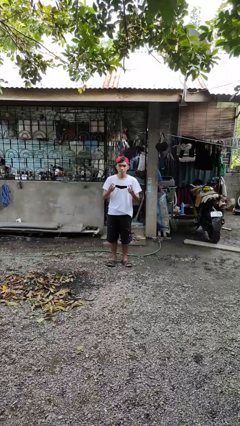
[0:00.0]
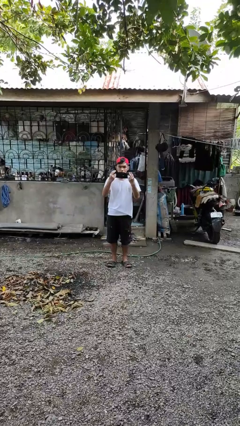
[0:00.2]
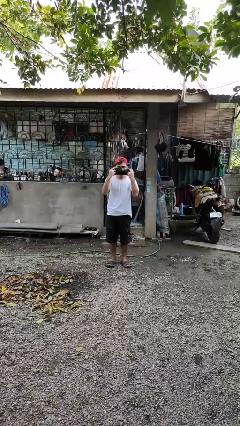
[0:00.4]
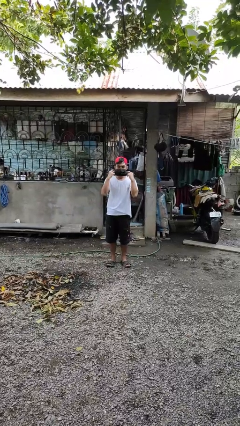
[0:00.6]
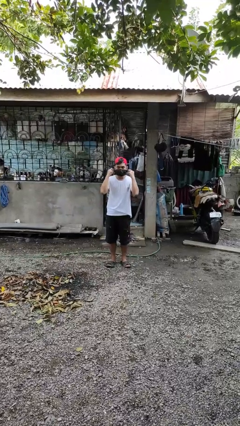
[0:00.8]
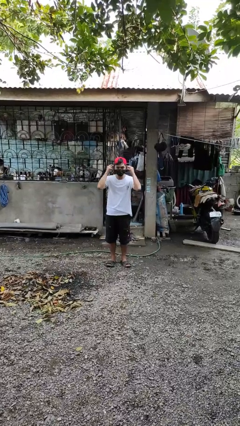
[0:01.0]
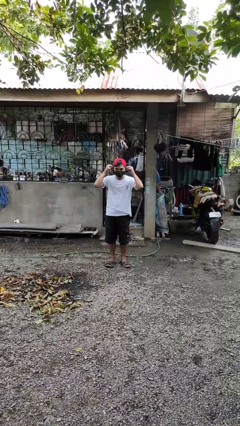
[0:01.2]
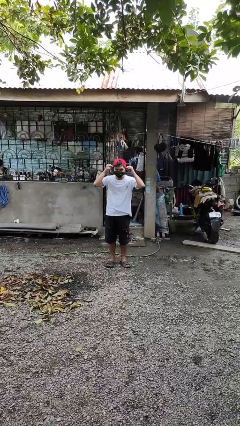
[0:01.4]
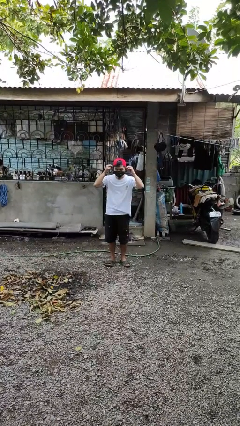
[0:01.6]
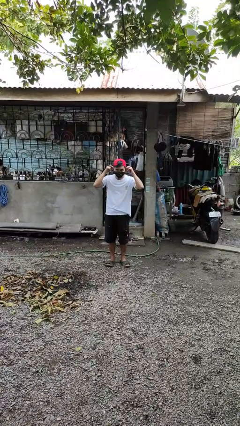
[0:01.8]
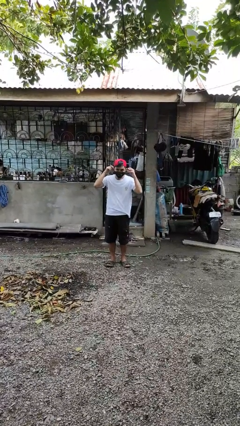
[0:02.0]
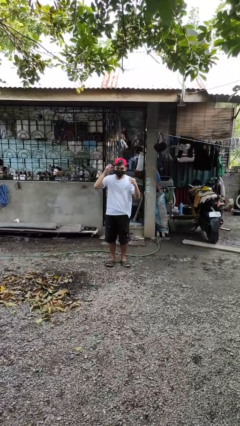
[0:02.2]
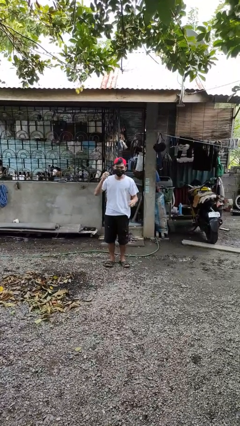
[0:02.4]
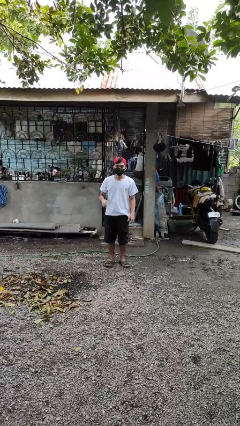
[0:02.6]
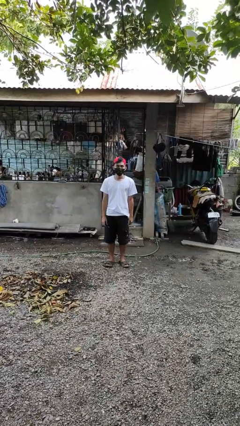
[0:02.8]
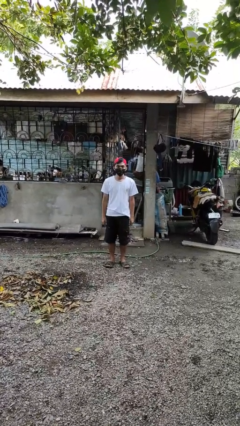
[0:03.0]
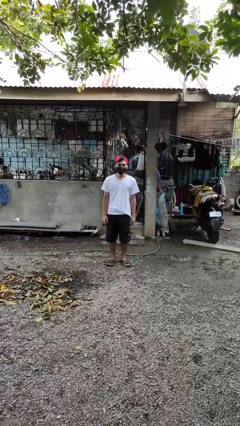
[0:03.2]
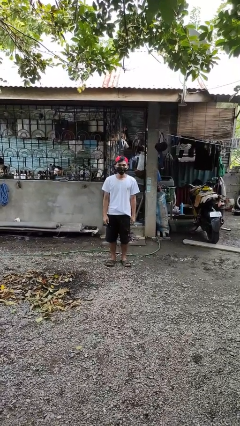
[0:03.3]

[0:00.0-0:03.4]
person puts on facemask

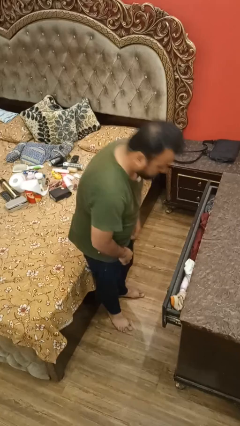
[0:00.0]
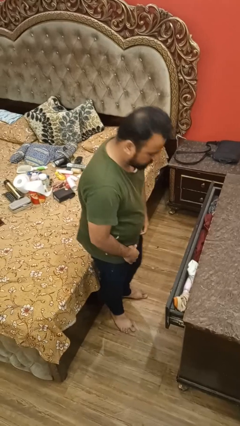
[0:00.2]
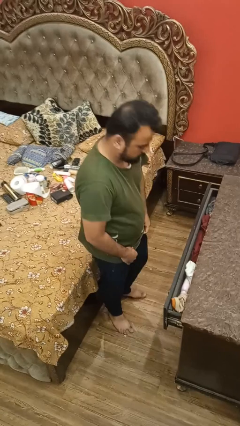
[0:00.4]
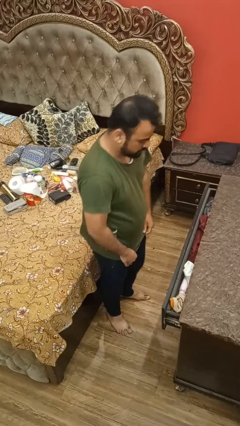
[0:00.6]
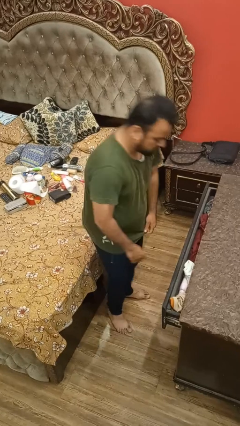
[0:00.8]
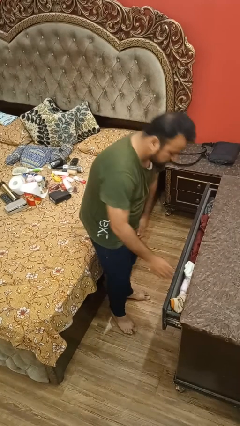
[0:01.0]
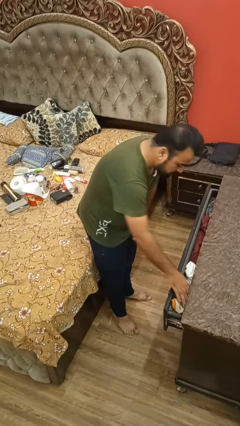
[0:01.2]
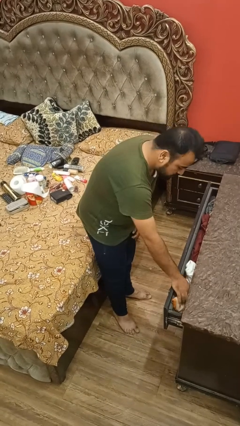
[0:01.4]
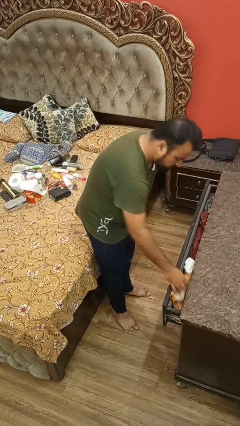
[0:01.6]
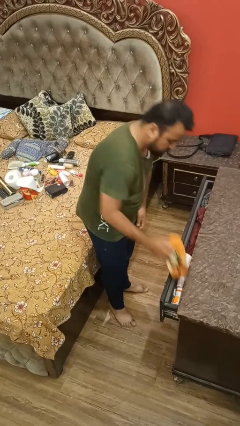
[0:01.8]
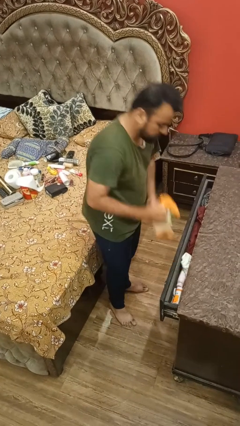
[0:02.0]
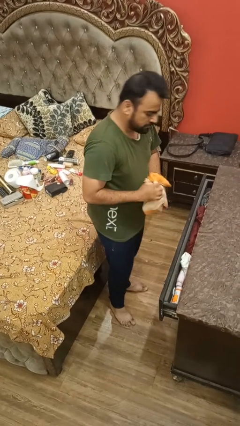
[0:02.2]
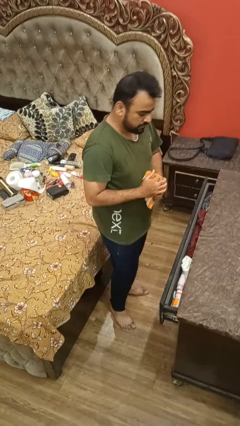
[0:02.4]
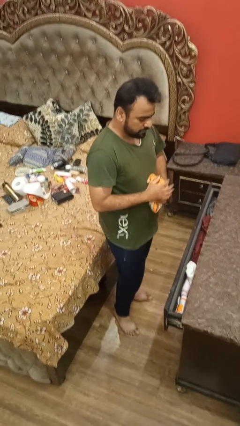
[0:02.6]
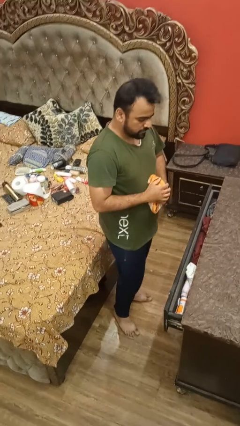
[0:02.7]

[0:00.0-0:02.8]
person takes clothes from dresser

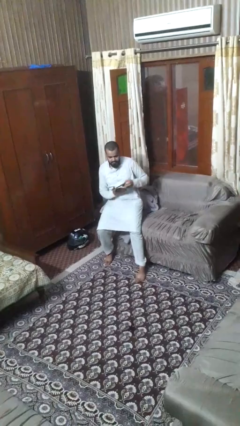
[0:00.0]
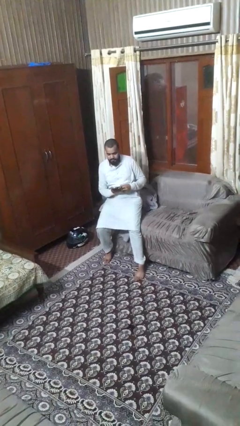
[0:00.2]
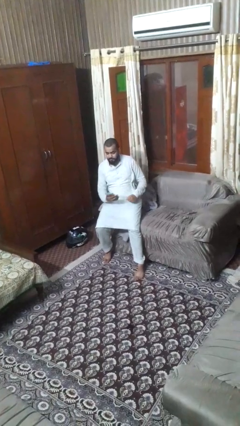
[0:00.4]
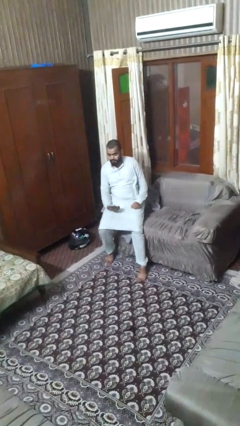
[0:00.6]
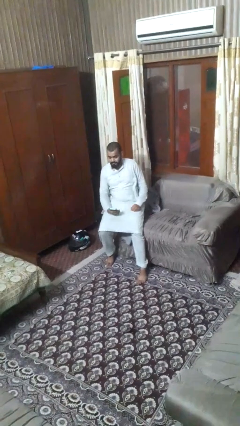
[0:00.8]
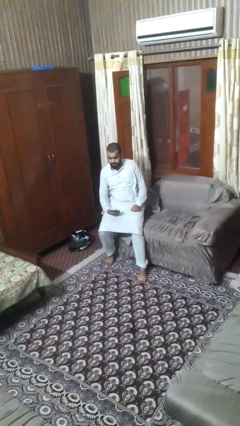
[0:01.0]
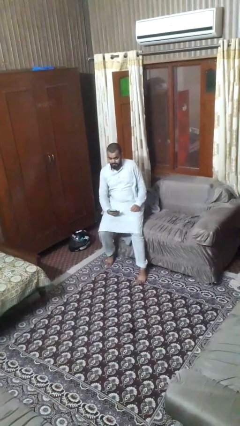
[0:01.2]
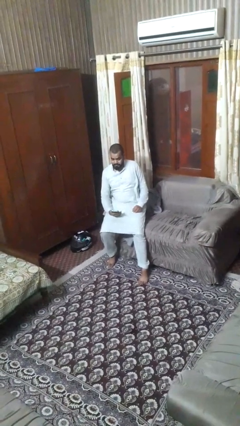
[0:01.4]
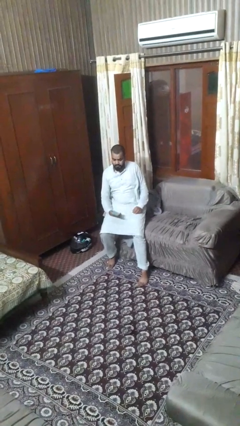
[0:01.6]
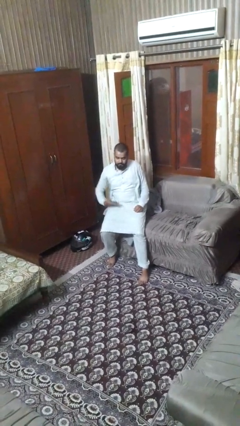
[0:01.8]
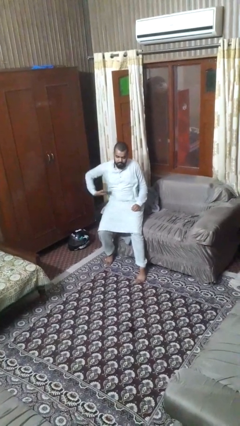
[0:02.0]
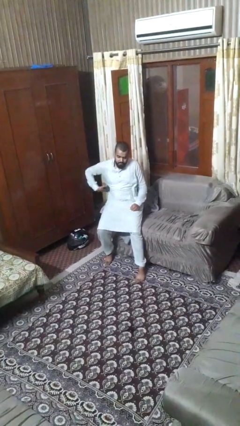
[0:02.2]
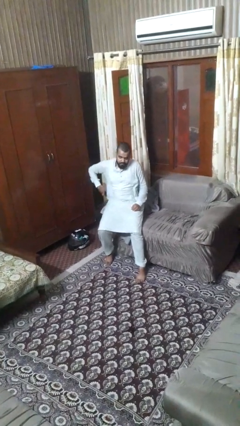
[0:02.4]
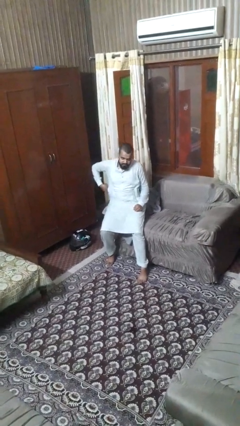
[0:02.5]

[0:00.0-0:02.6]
person takes phone from pocket

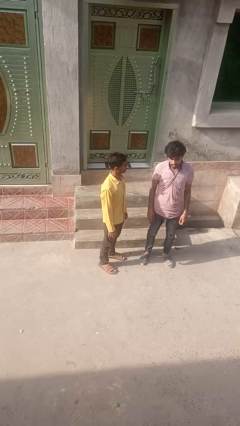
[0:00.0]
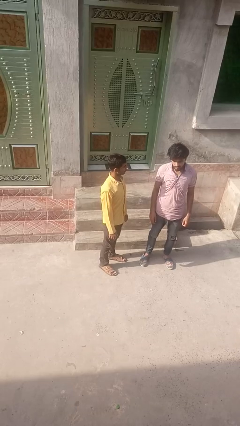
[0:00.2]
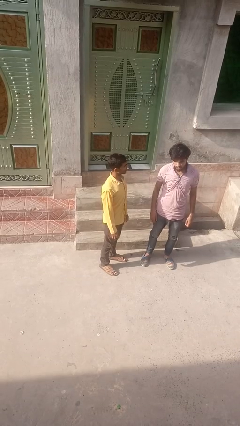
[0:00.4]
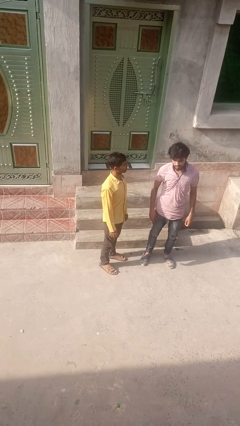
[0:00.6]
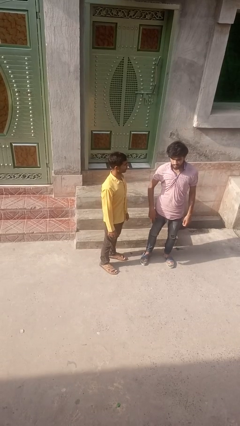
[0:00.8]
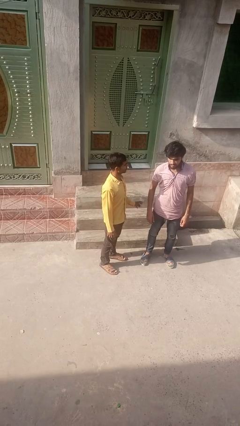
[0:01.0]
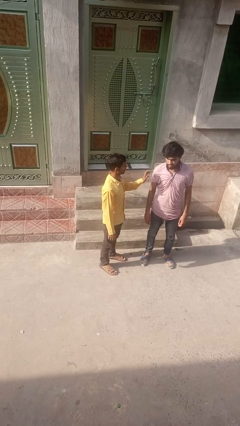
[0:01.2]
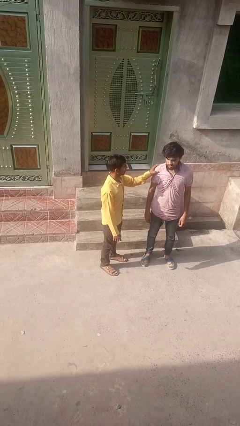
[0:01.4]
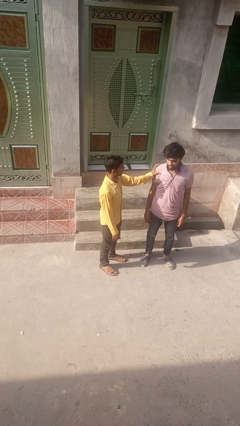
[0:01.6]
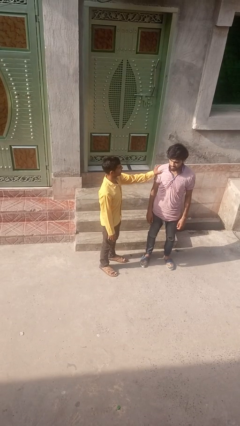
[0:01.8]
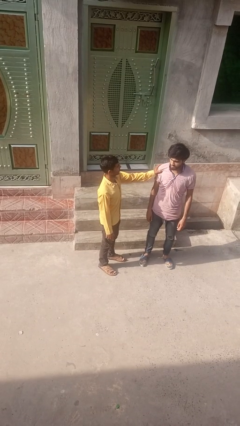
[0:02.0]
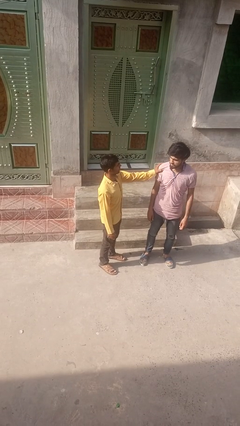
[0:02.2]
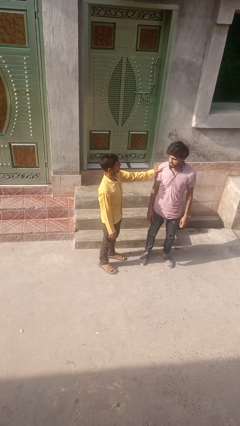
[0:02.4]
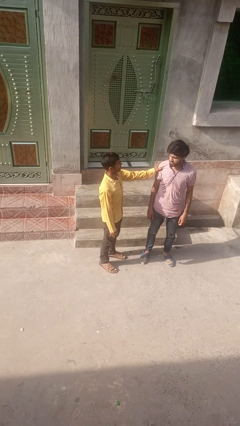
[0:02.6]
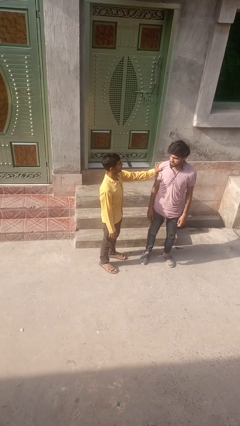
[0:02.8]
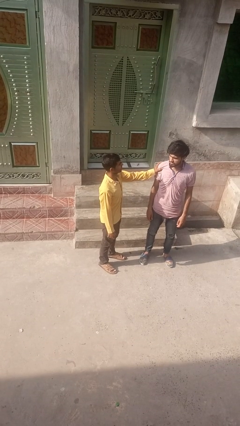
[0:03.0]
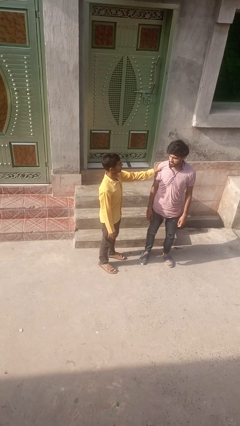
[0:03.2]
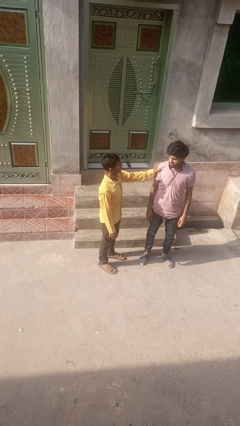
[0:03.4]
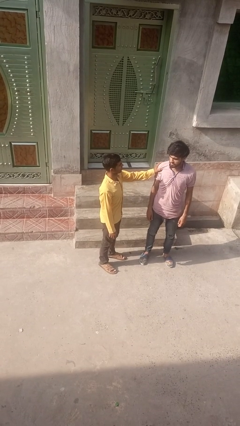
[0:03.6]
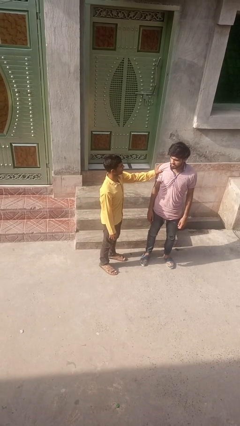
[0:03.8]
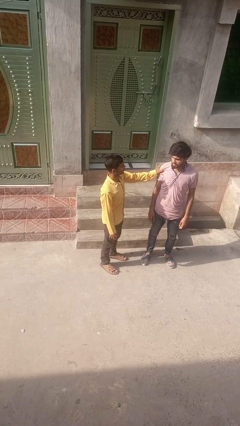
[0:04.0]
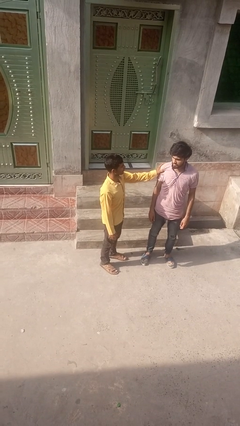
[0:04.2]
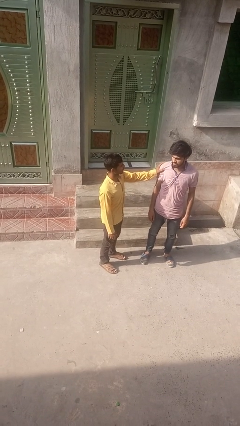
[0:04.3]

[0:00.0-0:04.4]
person grabs person by shoulder

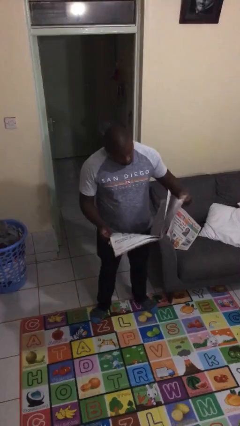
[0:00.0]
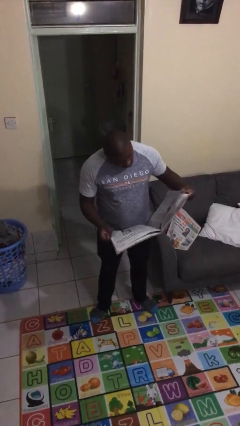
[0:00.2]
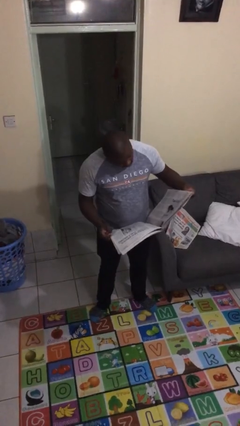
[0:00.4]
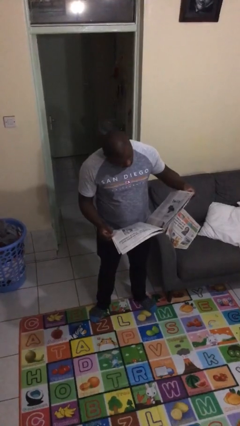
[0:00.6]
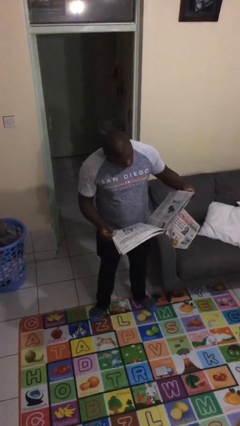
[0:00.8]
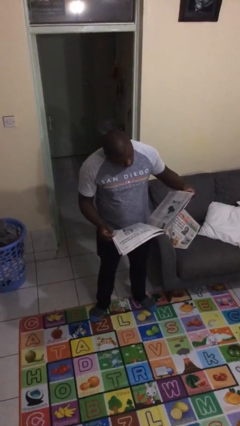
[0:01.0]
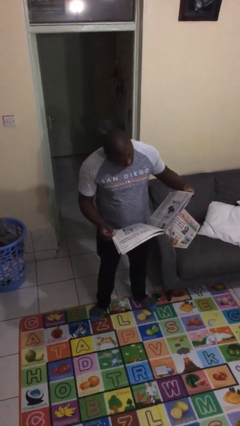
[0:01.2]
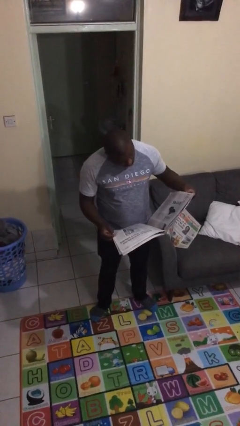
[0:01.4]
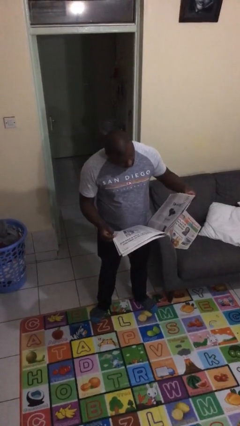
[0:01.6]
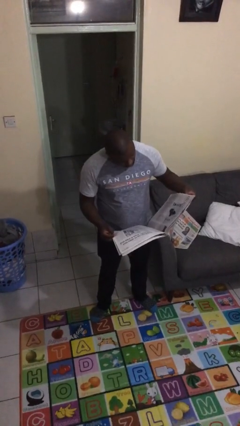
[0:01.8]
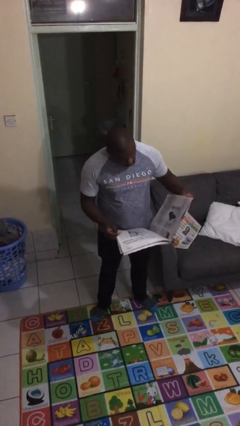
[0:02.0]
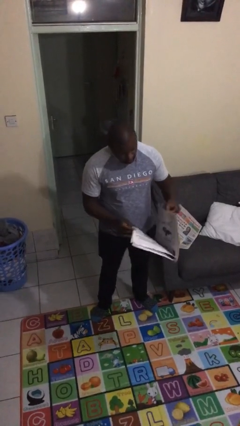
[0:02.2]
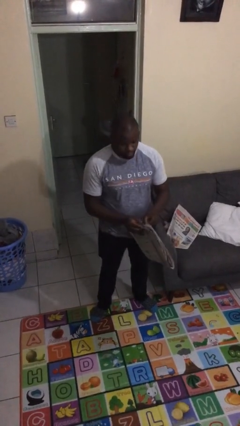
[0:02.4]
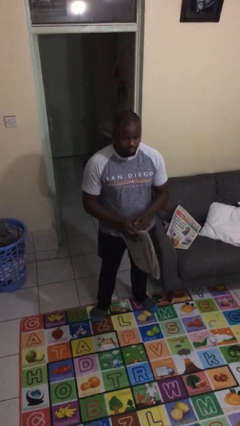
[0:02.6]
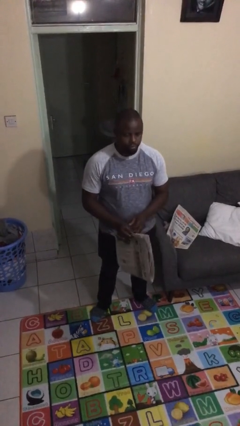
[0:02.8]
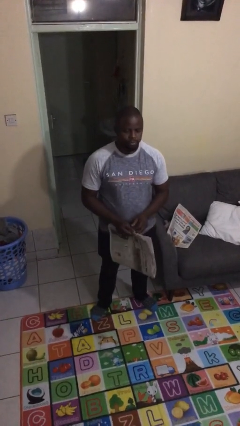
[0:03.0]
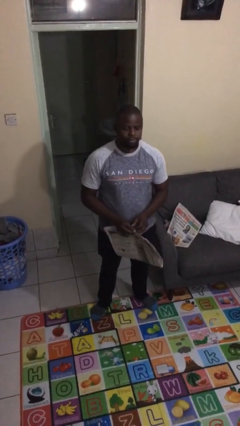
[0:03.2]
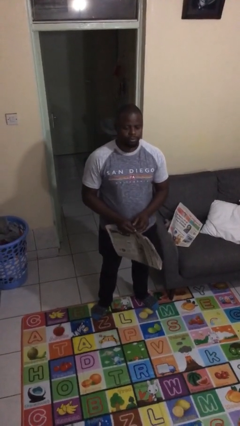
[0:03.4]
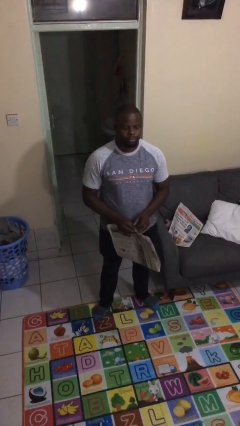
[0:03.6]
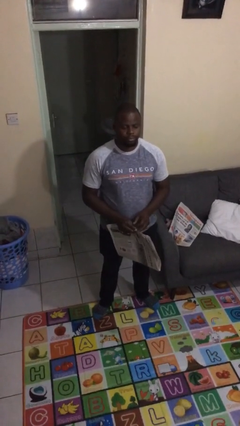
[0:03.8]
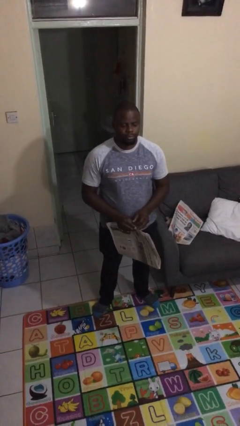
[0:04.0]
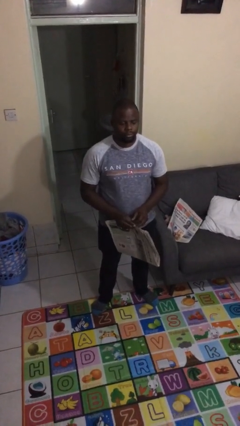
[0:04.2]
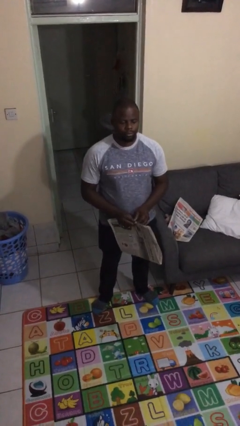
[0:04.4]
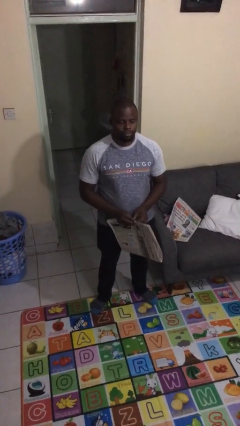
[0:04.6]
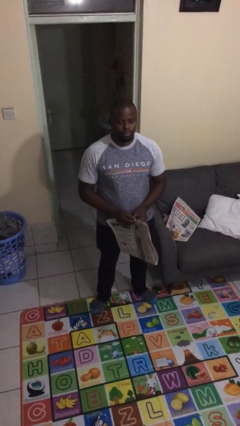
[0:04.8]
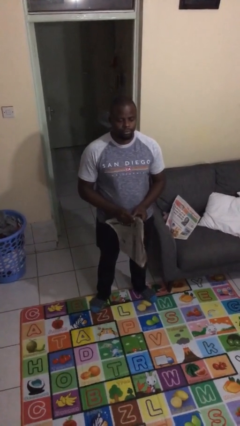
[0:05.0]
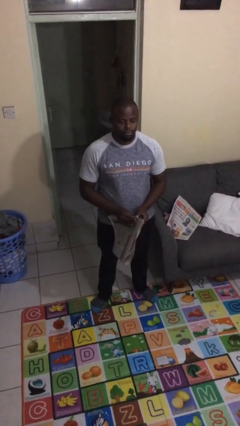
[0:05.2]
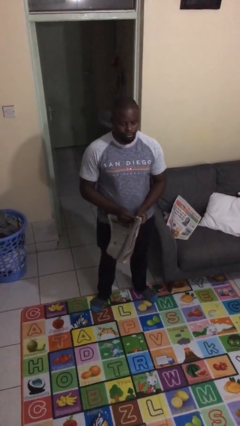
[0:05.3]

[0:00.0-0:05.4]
person reads newspaper
